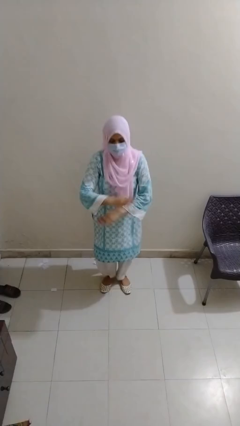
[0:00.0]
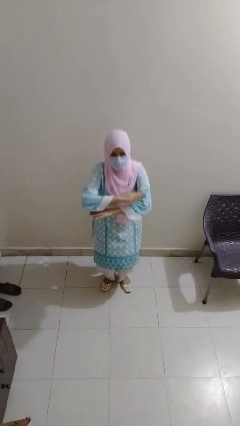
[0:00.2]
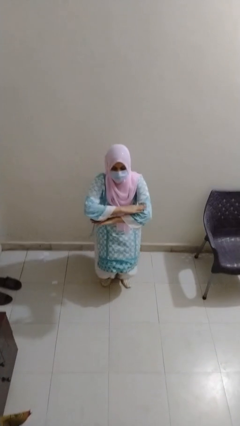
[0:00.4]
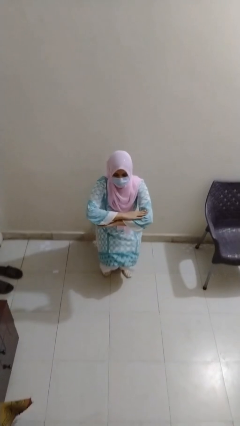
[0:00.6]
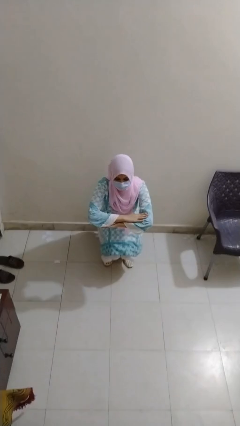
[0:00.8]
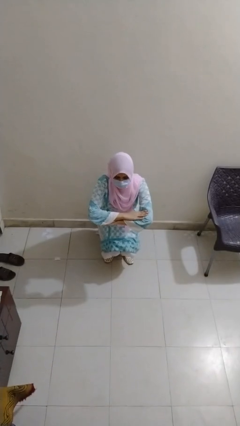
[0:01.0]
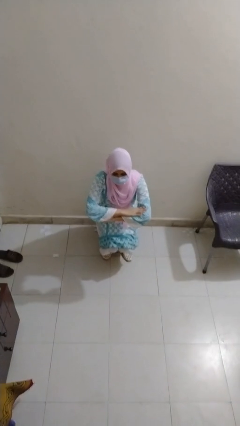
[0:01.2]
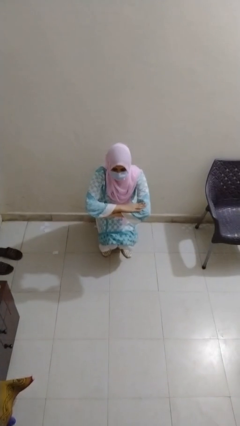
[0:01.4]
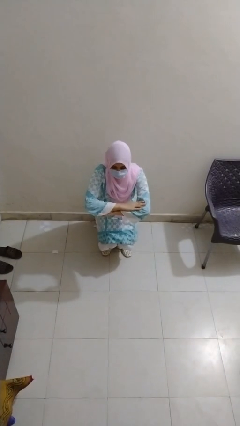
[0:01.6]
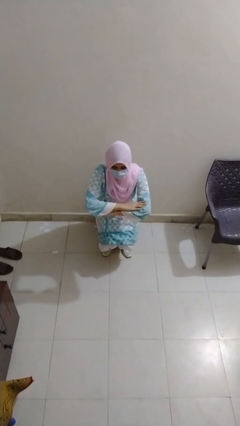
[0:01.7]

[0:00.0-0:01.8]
person squats

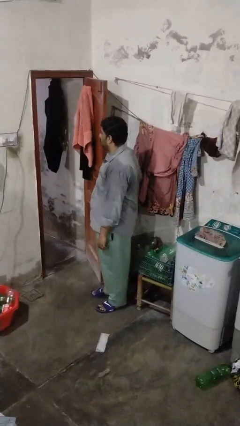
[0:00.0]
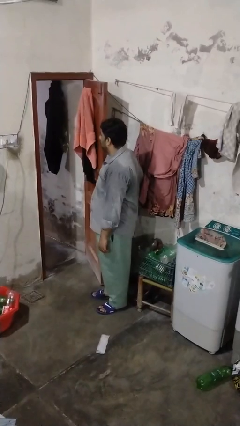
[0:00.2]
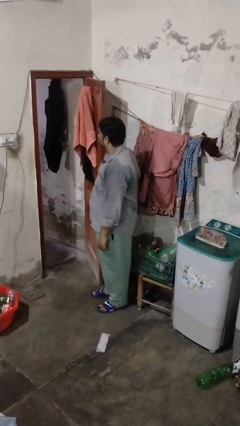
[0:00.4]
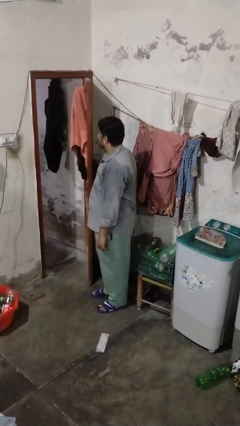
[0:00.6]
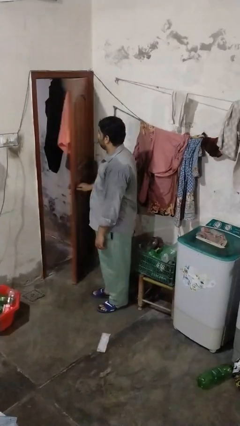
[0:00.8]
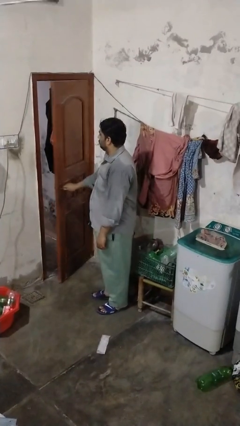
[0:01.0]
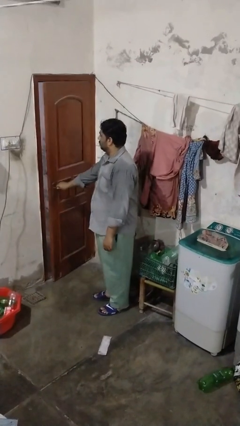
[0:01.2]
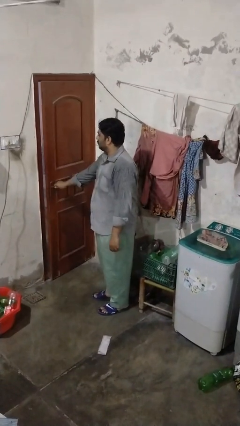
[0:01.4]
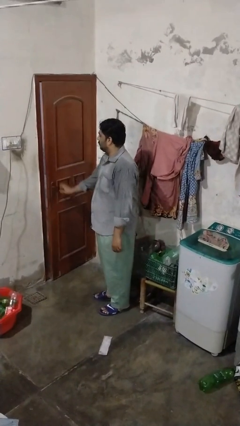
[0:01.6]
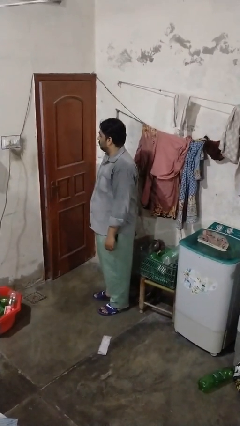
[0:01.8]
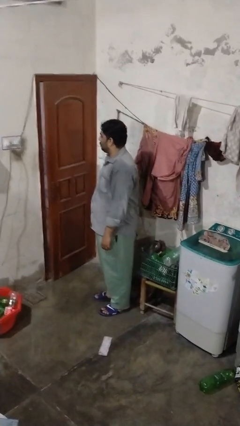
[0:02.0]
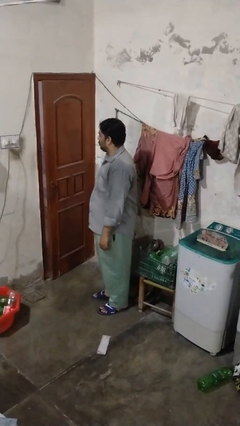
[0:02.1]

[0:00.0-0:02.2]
person closes closet door

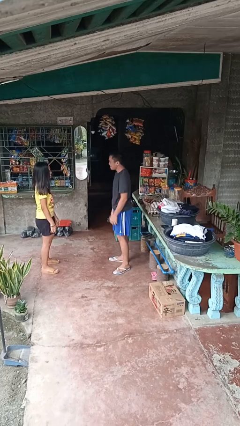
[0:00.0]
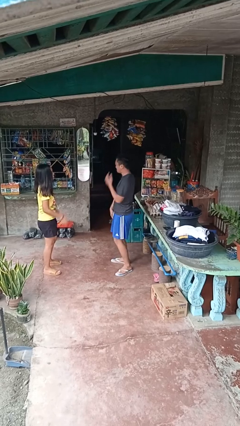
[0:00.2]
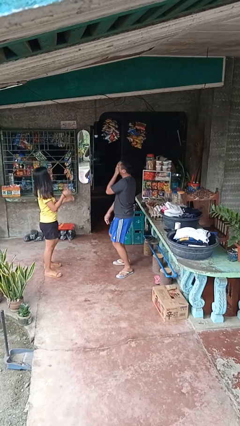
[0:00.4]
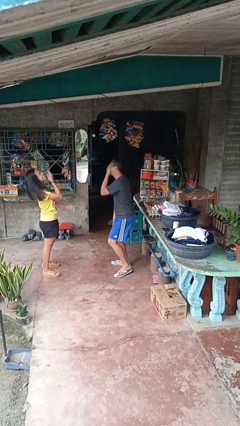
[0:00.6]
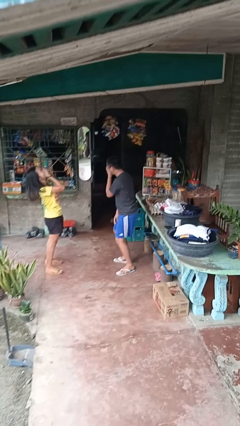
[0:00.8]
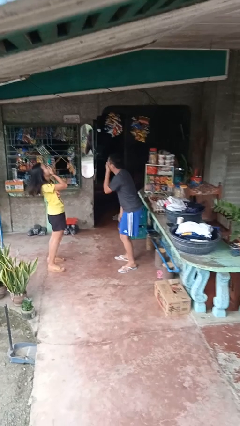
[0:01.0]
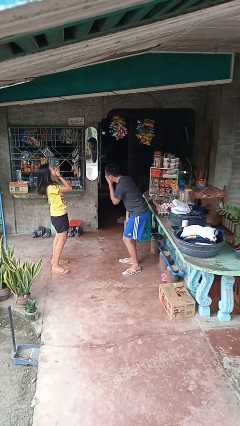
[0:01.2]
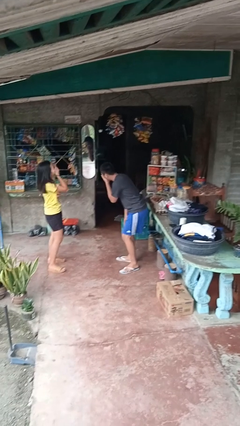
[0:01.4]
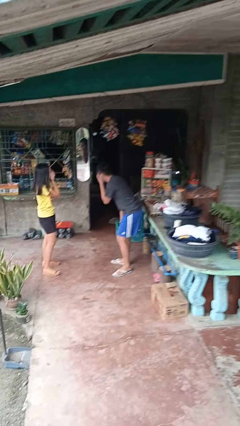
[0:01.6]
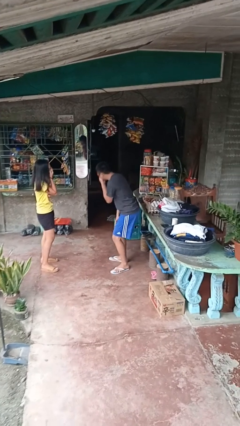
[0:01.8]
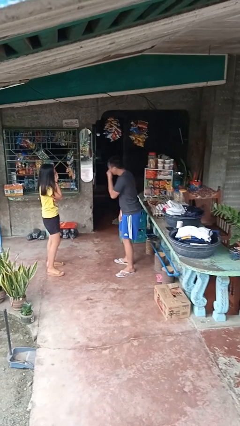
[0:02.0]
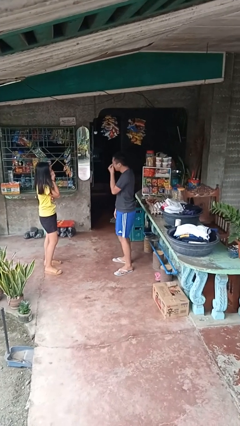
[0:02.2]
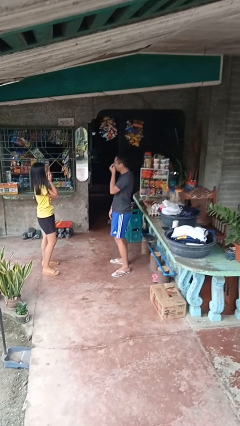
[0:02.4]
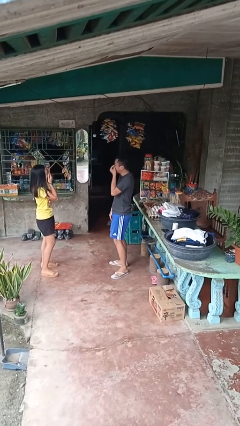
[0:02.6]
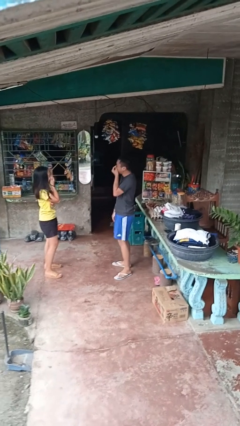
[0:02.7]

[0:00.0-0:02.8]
person laughs with person

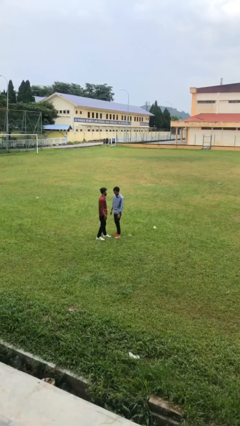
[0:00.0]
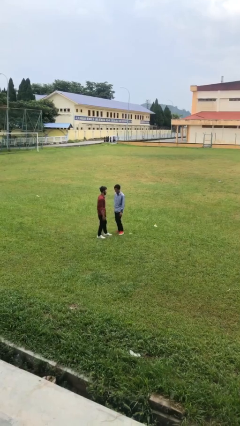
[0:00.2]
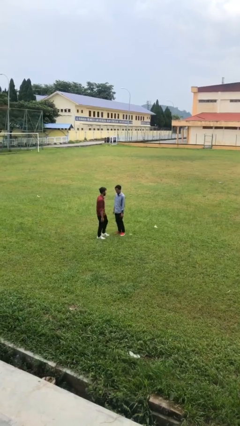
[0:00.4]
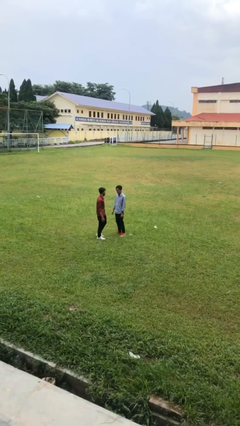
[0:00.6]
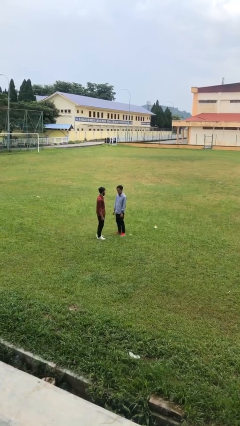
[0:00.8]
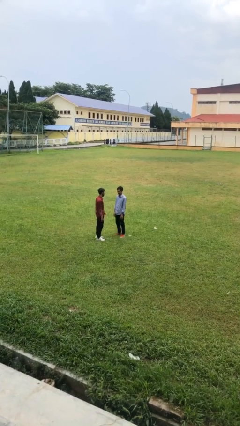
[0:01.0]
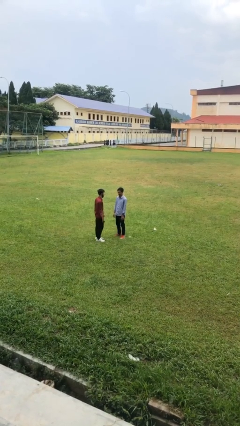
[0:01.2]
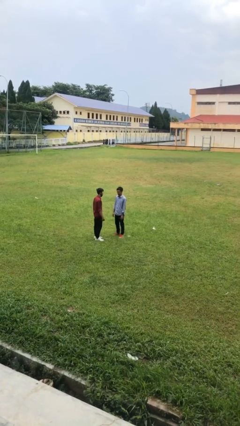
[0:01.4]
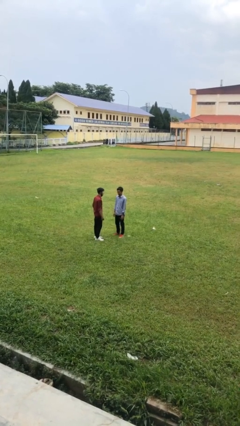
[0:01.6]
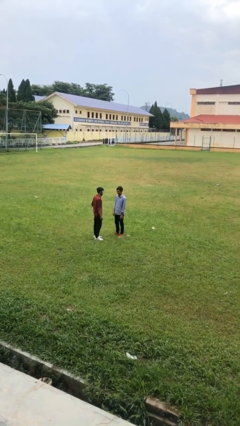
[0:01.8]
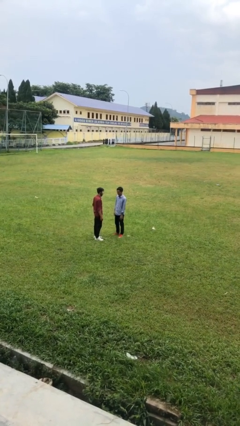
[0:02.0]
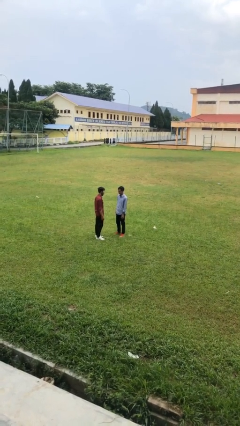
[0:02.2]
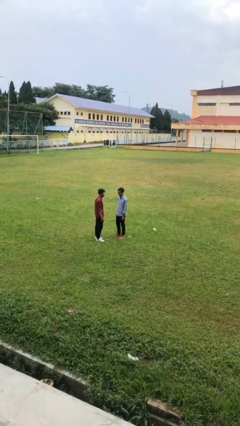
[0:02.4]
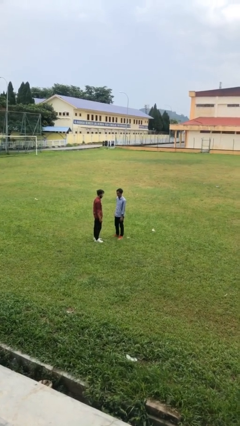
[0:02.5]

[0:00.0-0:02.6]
person talks to person

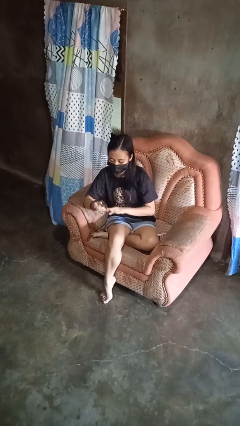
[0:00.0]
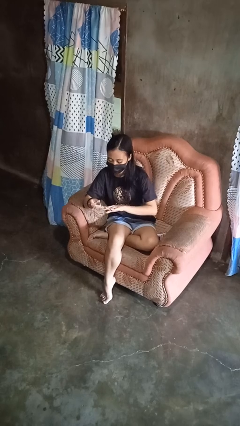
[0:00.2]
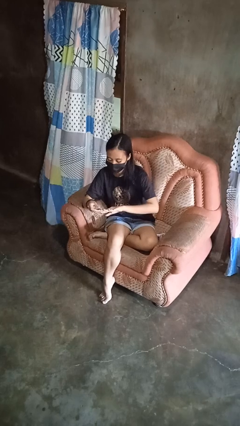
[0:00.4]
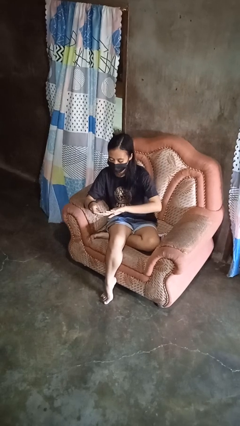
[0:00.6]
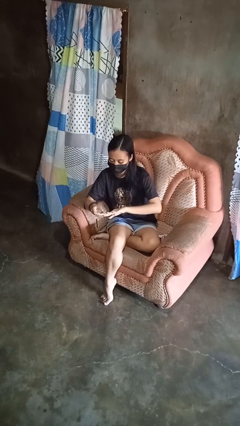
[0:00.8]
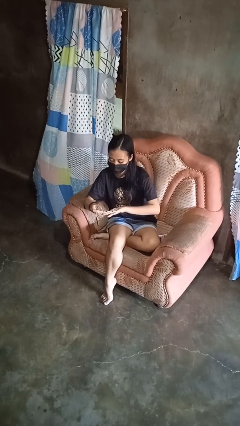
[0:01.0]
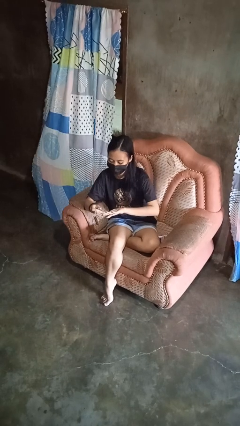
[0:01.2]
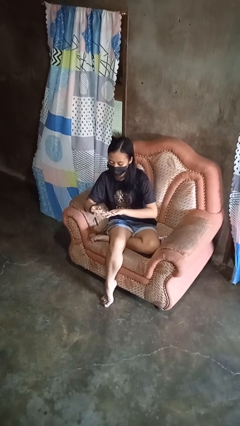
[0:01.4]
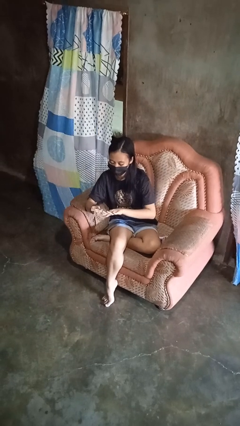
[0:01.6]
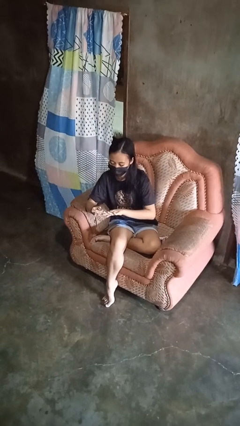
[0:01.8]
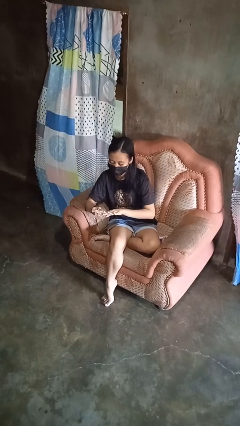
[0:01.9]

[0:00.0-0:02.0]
person clips fingernails

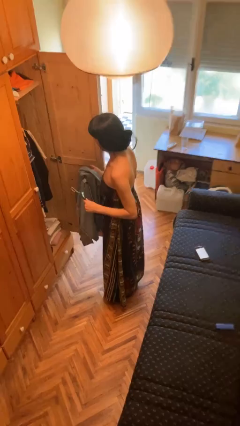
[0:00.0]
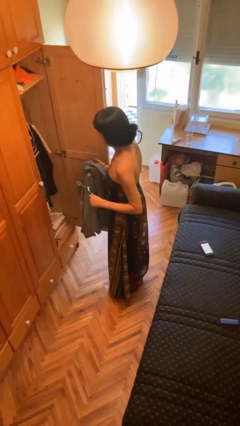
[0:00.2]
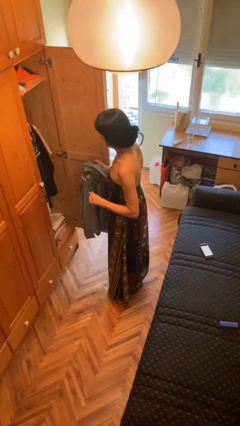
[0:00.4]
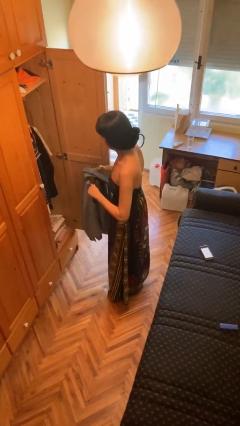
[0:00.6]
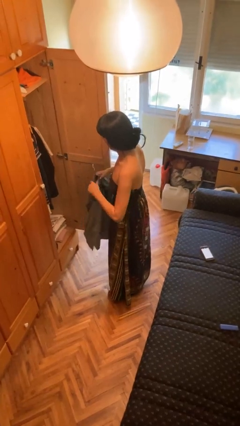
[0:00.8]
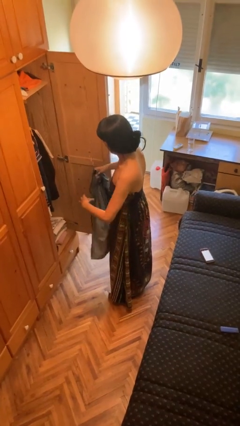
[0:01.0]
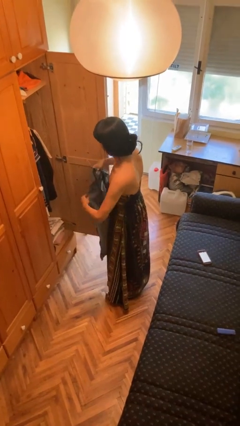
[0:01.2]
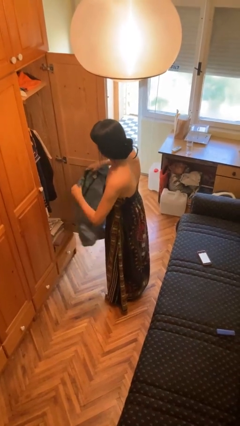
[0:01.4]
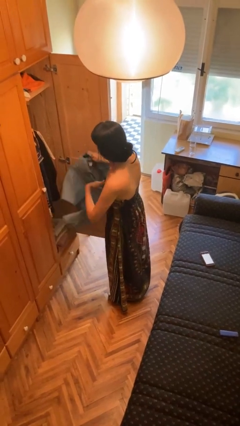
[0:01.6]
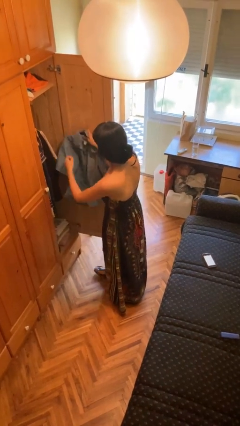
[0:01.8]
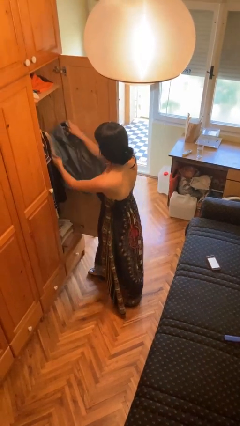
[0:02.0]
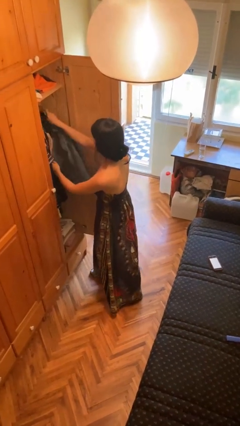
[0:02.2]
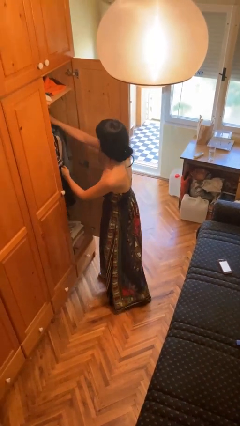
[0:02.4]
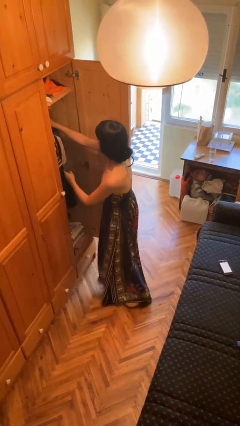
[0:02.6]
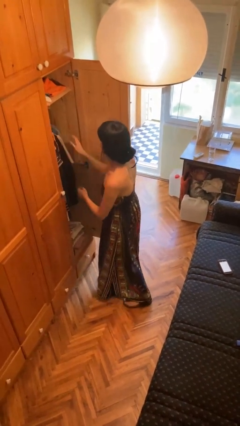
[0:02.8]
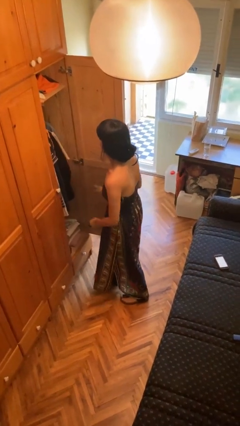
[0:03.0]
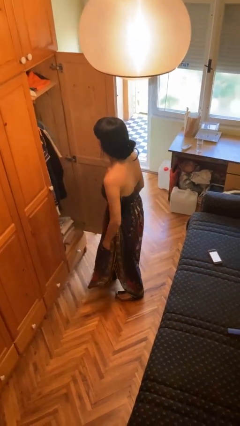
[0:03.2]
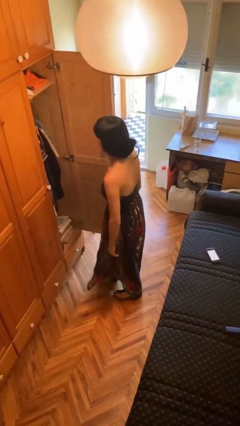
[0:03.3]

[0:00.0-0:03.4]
person puts clothes into closet

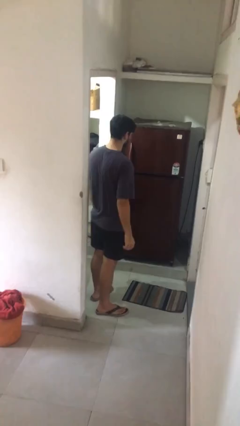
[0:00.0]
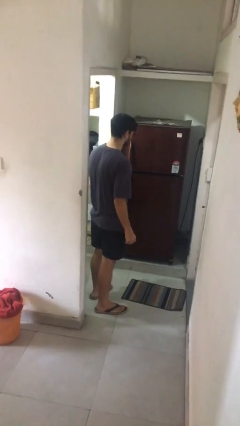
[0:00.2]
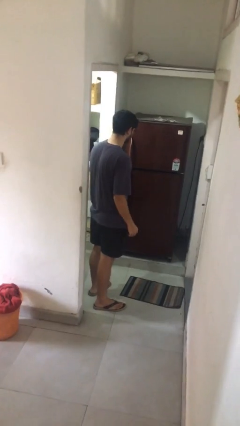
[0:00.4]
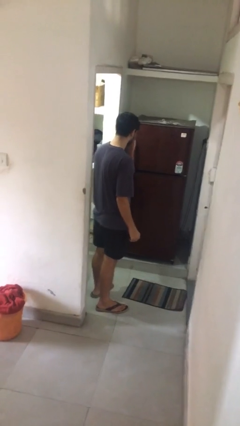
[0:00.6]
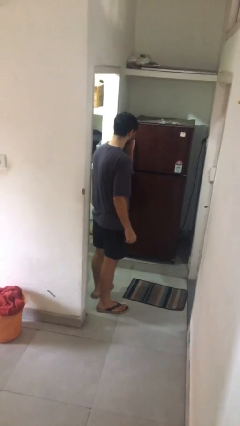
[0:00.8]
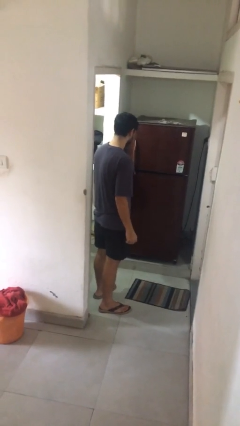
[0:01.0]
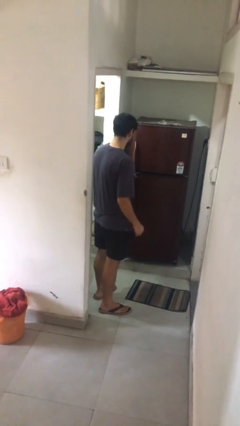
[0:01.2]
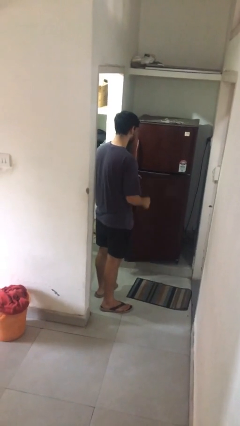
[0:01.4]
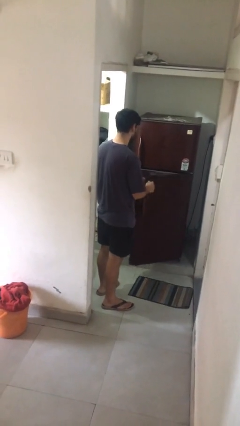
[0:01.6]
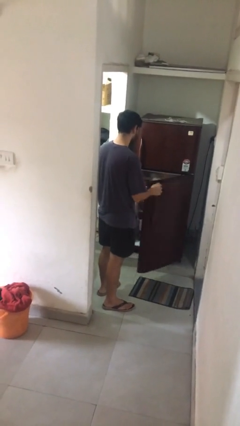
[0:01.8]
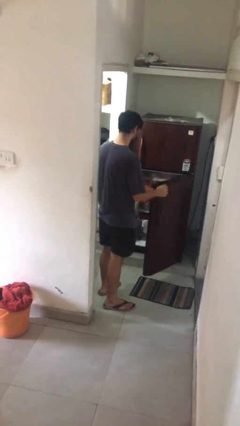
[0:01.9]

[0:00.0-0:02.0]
person opens refrigerator
